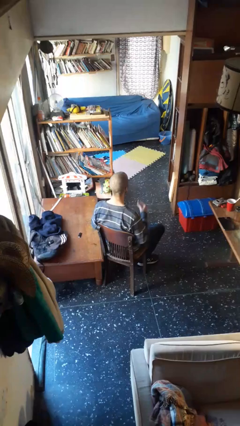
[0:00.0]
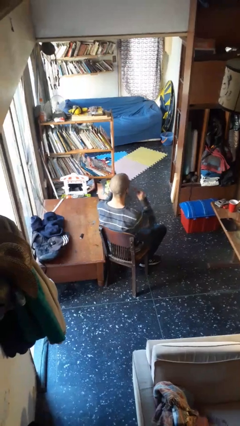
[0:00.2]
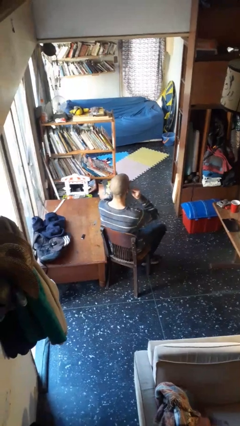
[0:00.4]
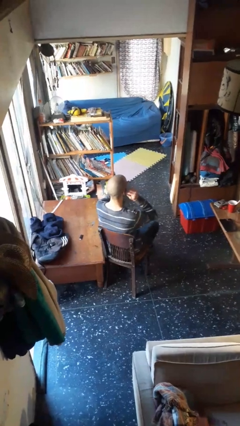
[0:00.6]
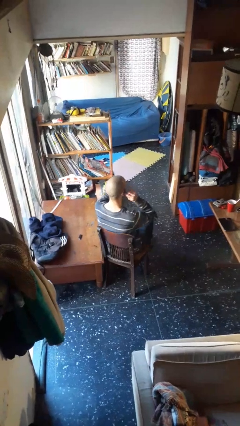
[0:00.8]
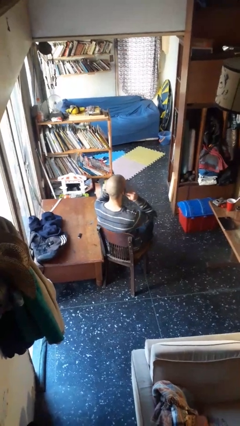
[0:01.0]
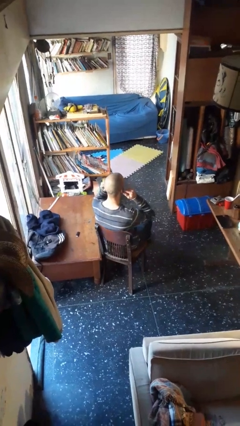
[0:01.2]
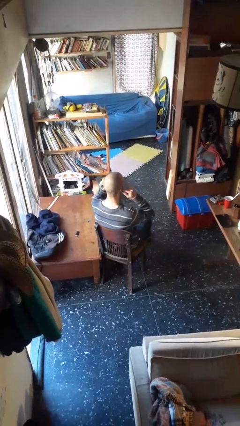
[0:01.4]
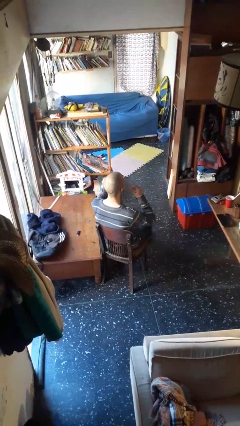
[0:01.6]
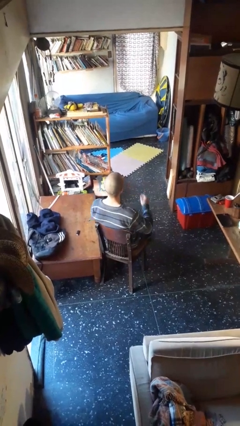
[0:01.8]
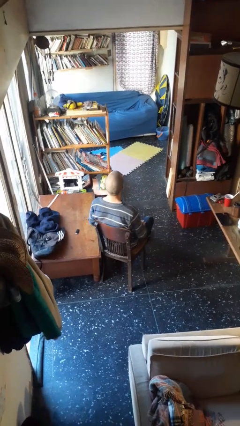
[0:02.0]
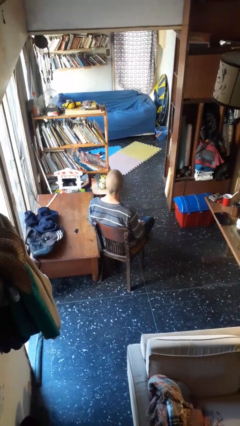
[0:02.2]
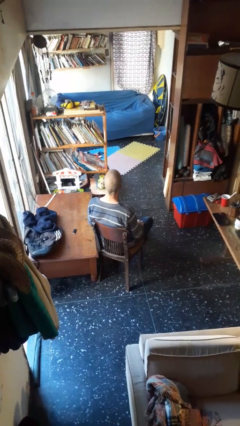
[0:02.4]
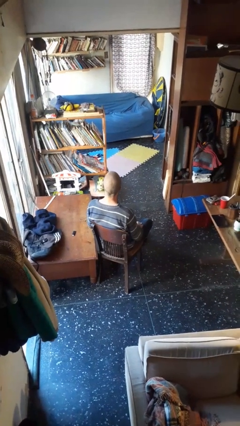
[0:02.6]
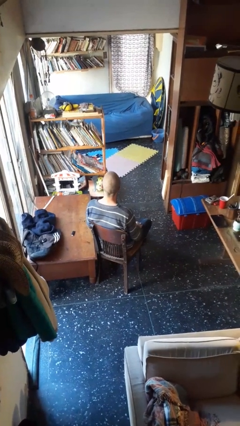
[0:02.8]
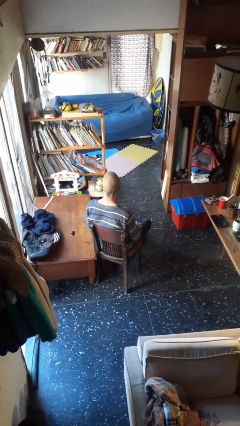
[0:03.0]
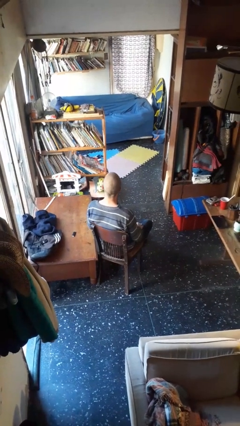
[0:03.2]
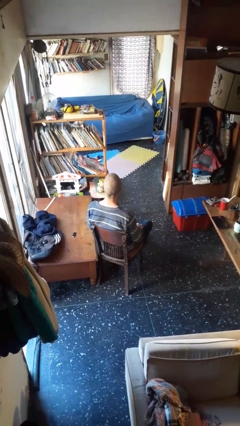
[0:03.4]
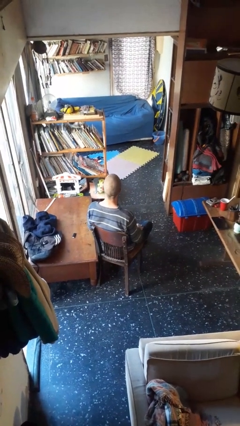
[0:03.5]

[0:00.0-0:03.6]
person puts on headphones

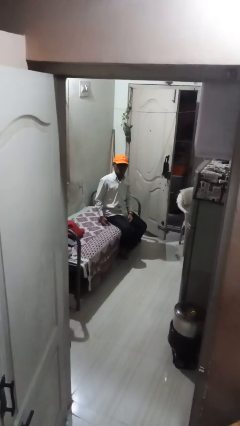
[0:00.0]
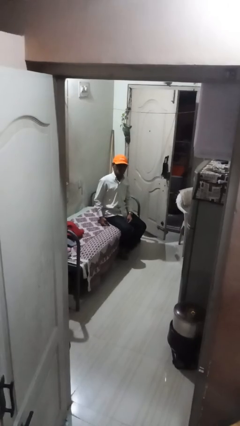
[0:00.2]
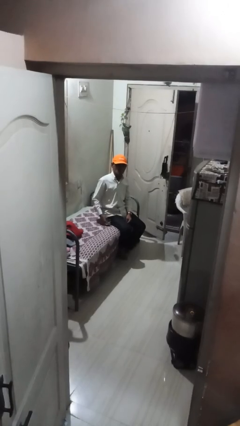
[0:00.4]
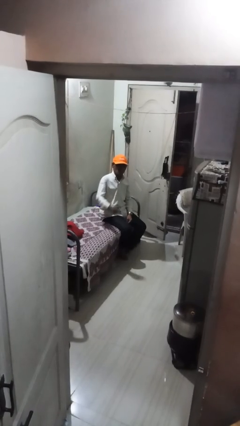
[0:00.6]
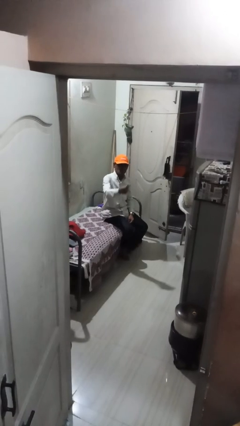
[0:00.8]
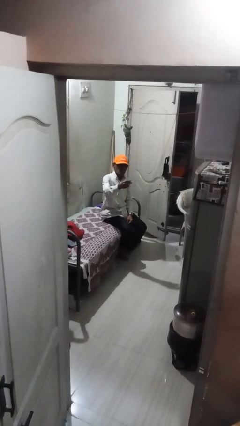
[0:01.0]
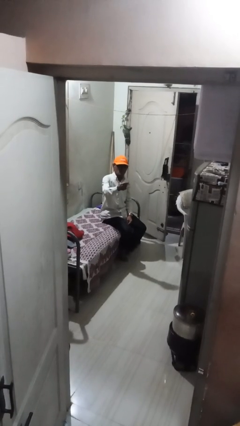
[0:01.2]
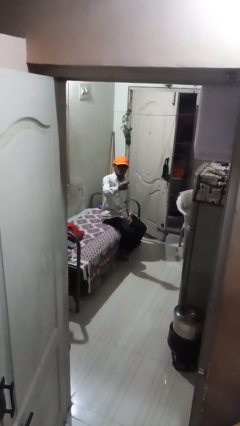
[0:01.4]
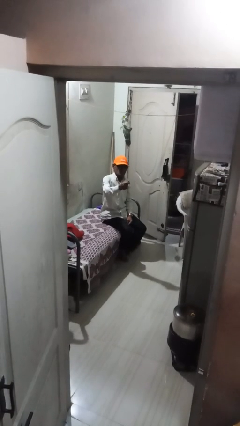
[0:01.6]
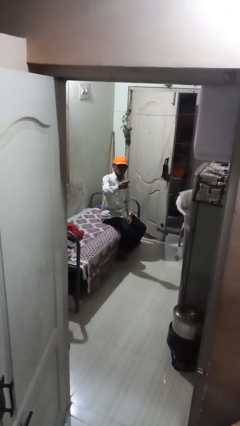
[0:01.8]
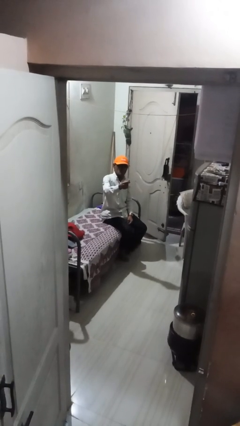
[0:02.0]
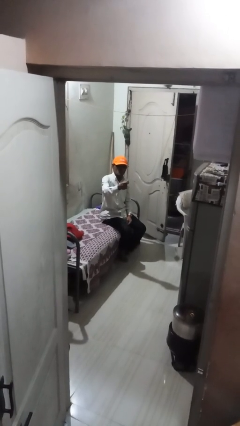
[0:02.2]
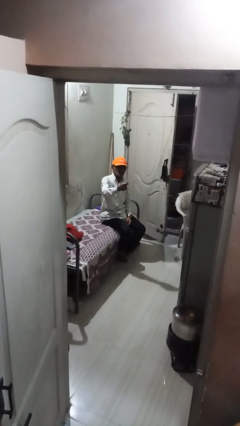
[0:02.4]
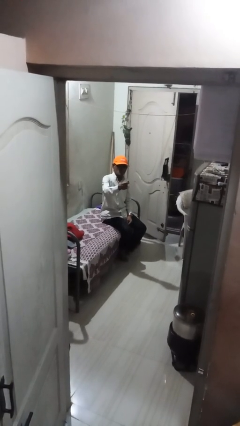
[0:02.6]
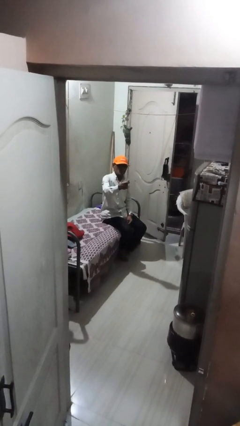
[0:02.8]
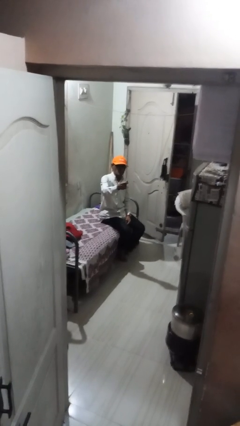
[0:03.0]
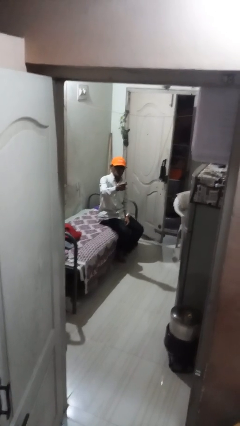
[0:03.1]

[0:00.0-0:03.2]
person snaps fingers

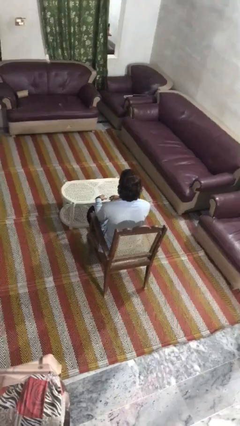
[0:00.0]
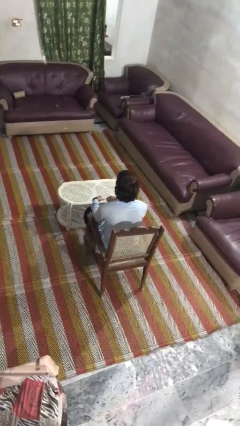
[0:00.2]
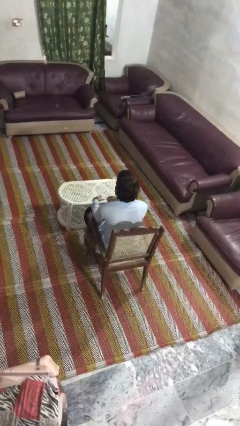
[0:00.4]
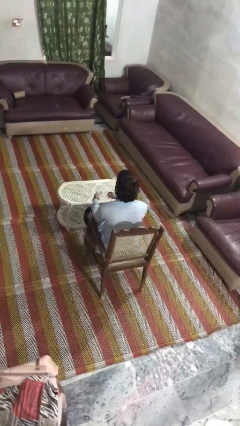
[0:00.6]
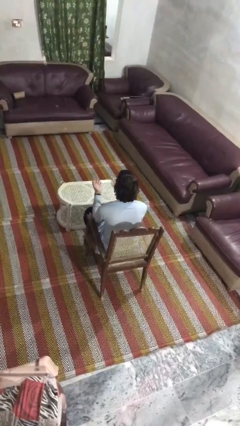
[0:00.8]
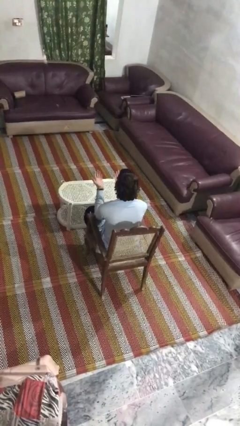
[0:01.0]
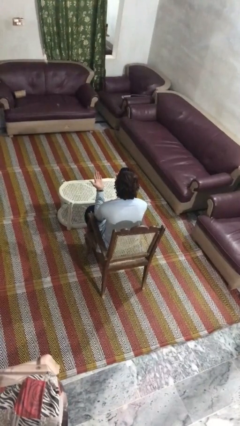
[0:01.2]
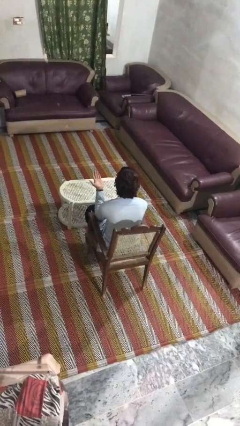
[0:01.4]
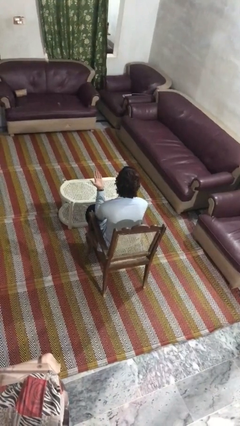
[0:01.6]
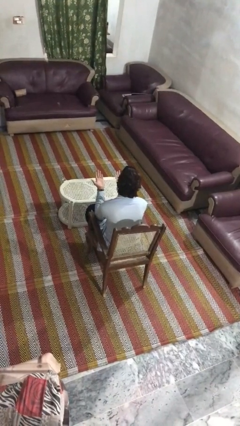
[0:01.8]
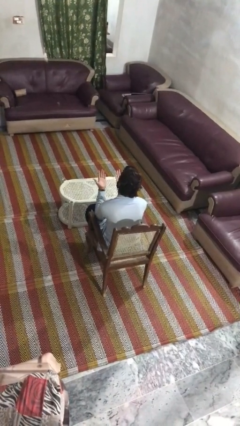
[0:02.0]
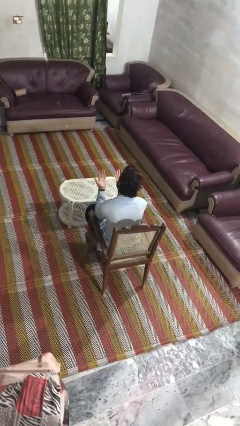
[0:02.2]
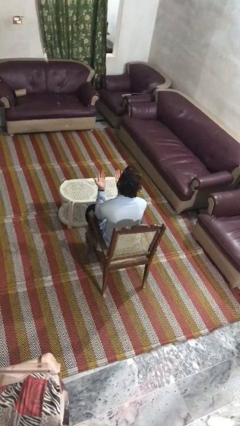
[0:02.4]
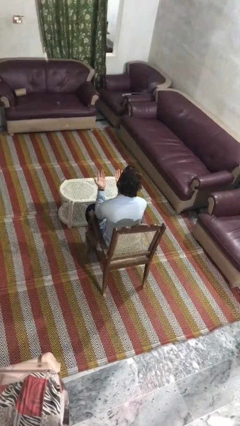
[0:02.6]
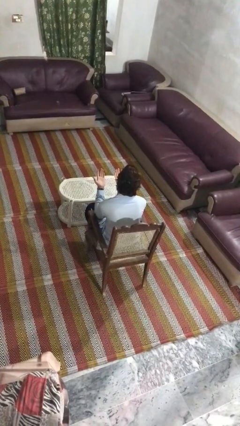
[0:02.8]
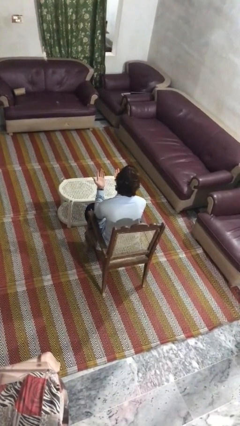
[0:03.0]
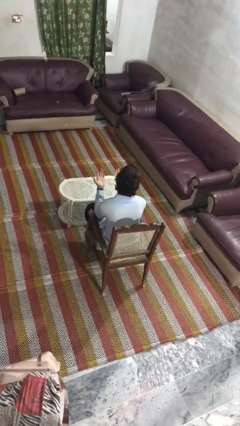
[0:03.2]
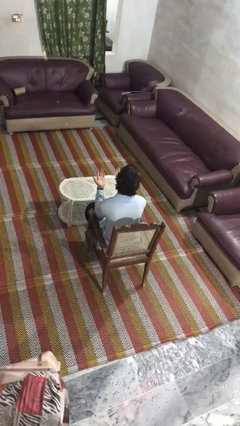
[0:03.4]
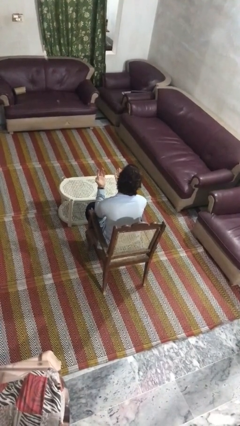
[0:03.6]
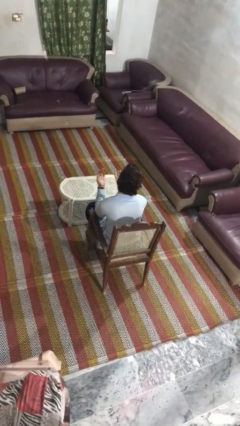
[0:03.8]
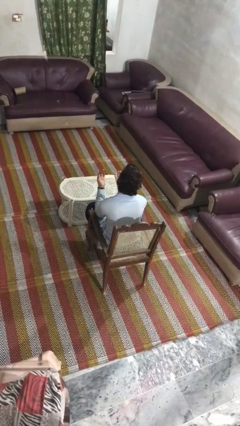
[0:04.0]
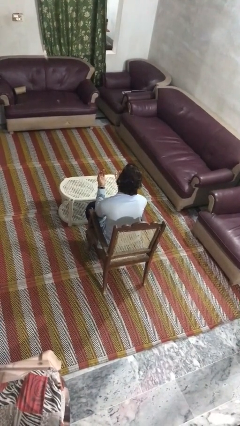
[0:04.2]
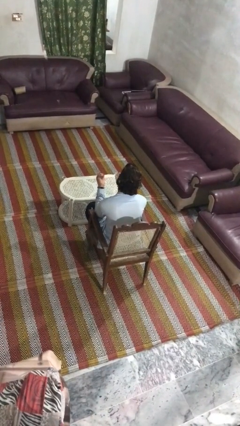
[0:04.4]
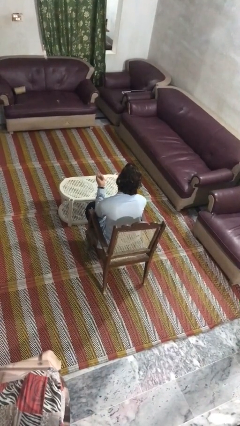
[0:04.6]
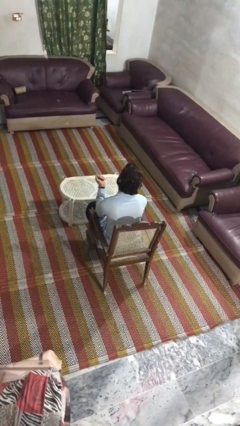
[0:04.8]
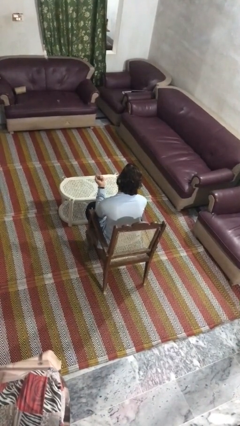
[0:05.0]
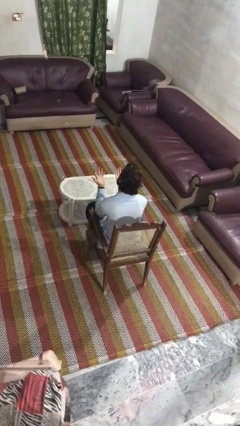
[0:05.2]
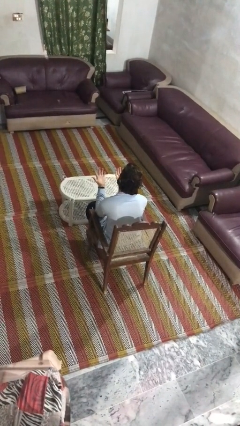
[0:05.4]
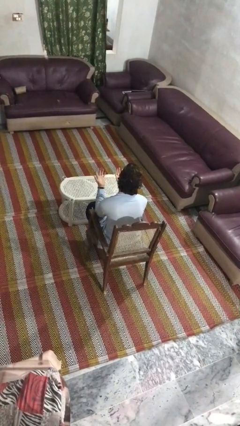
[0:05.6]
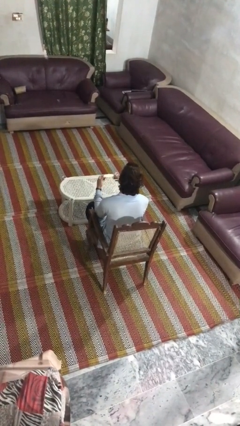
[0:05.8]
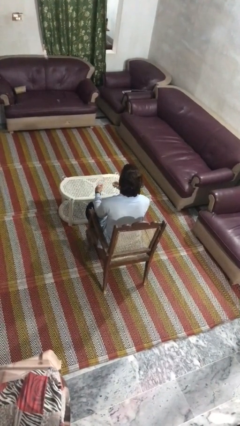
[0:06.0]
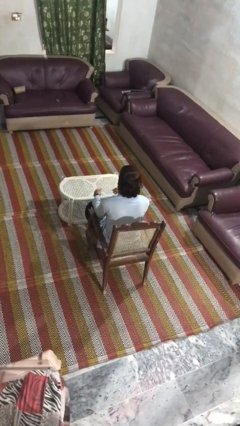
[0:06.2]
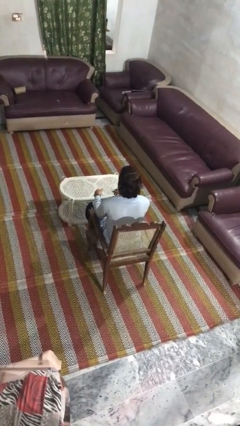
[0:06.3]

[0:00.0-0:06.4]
person looks at hands in lap

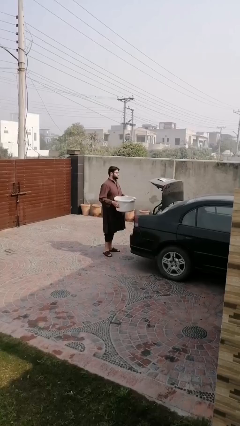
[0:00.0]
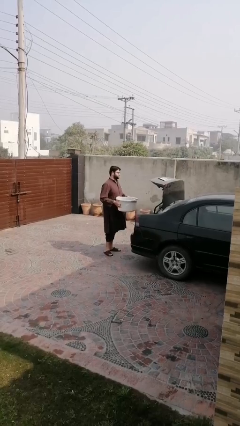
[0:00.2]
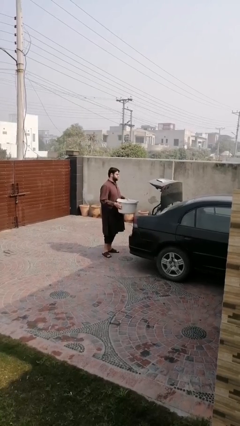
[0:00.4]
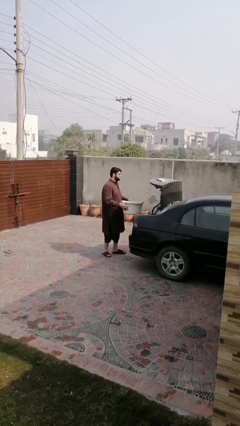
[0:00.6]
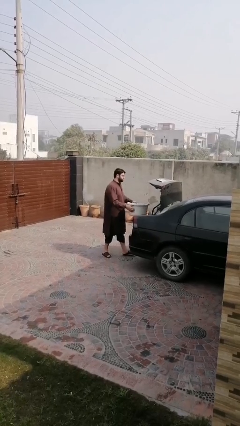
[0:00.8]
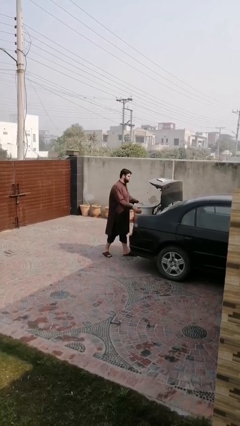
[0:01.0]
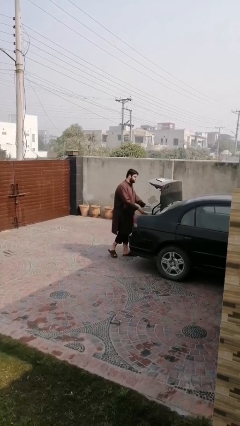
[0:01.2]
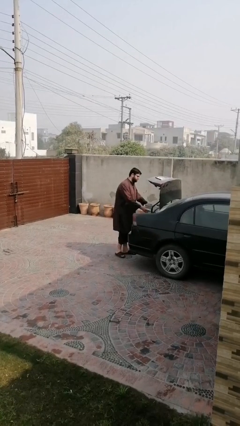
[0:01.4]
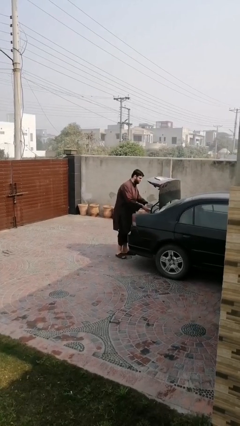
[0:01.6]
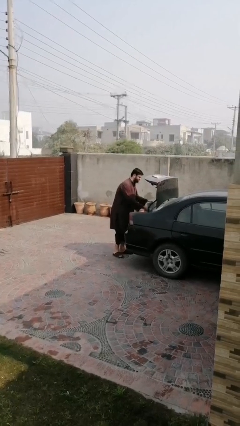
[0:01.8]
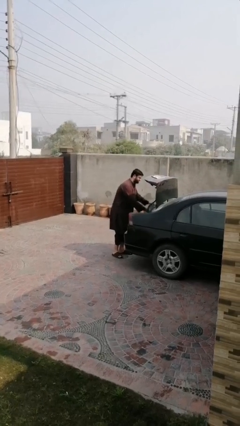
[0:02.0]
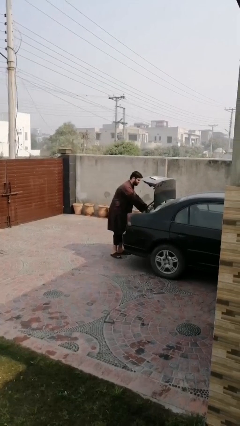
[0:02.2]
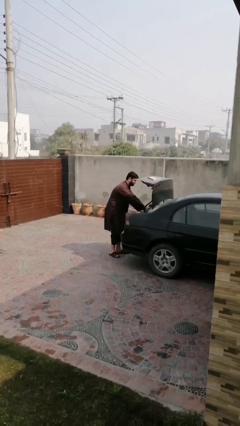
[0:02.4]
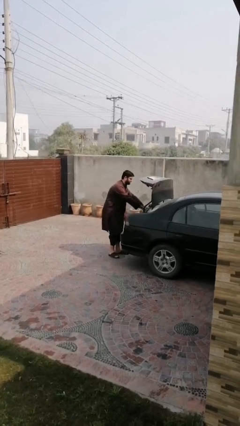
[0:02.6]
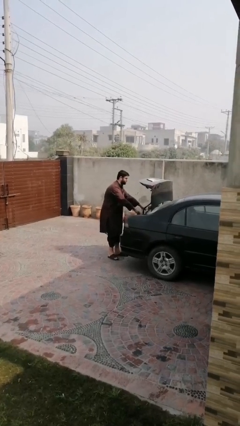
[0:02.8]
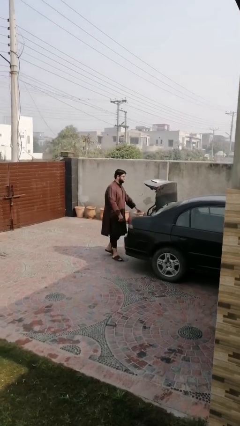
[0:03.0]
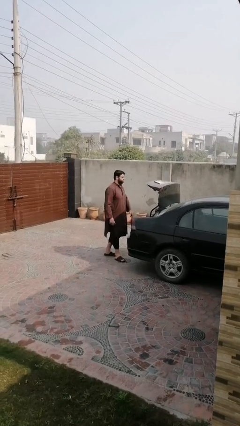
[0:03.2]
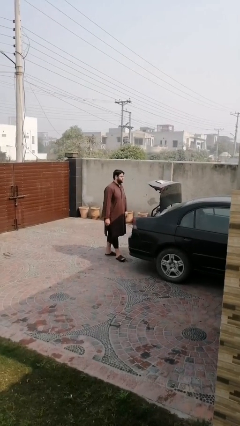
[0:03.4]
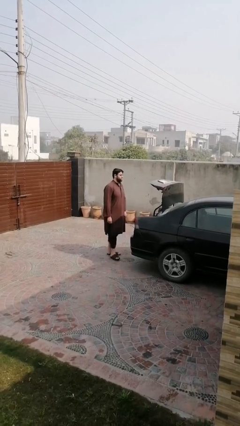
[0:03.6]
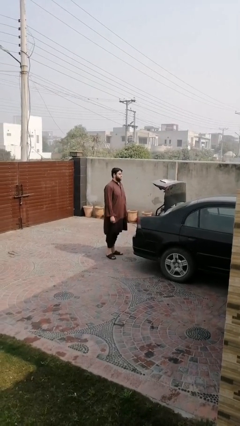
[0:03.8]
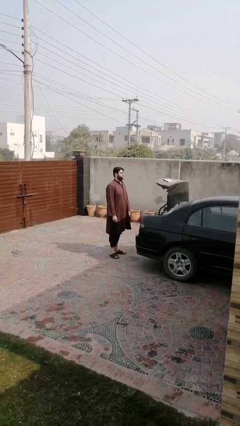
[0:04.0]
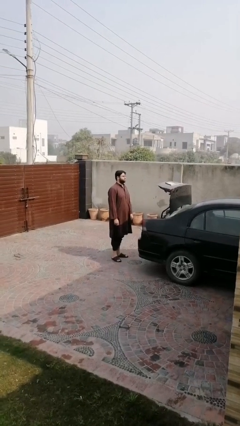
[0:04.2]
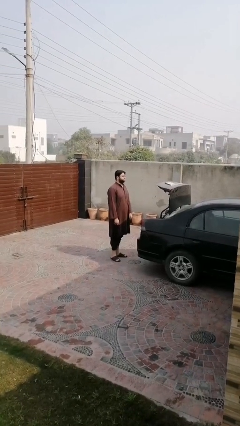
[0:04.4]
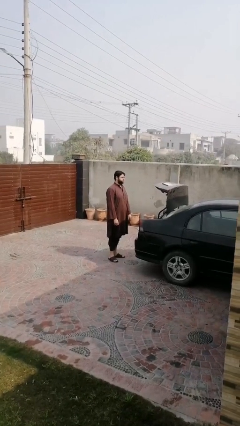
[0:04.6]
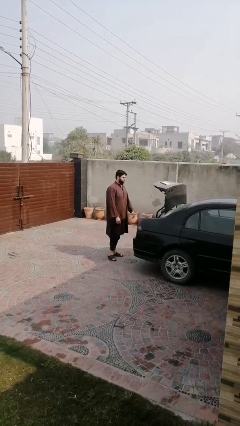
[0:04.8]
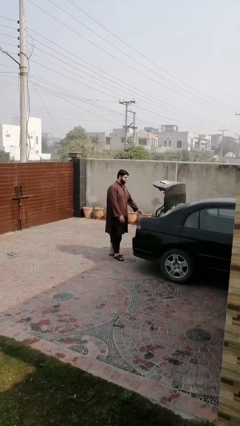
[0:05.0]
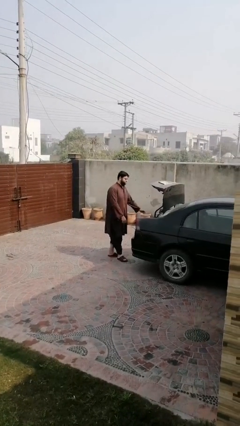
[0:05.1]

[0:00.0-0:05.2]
person loads car
